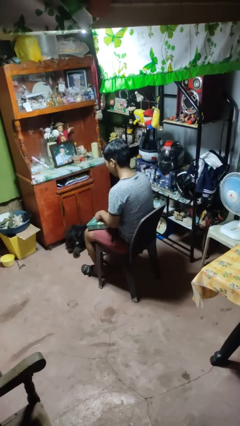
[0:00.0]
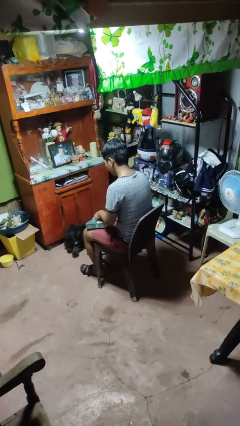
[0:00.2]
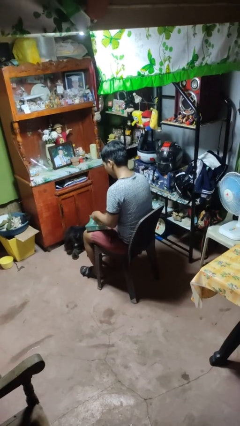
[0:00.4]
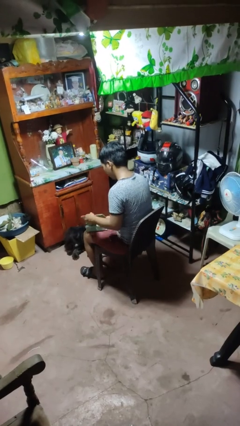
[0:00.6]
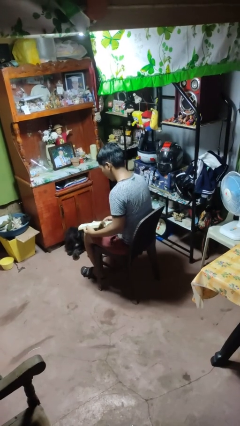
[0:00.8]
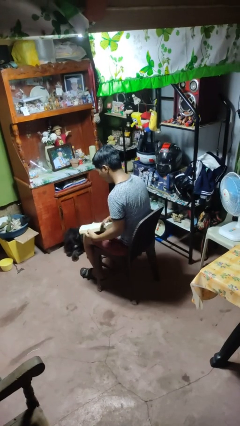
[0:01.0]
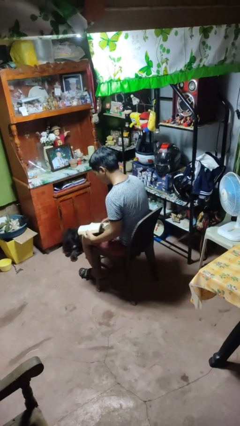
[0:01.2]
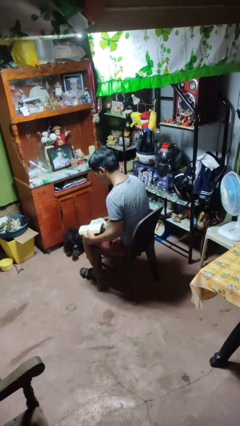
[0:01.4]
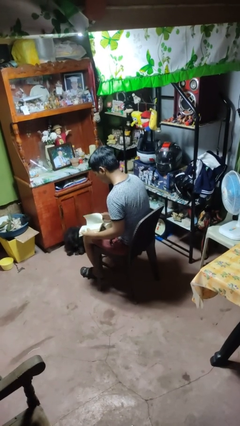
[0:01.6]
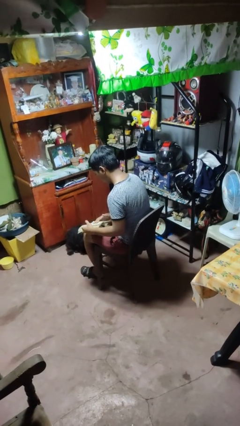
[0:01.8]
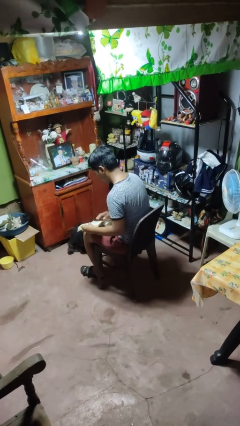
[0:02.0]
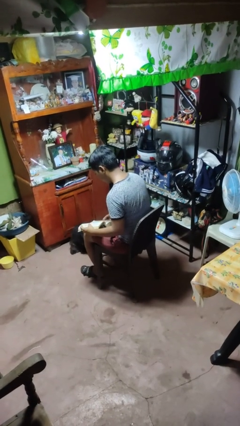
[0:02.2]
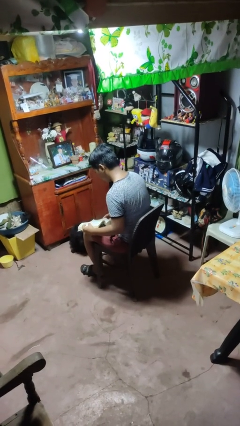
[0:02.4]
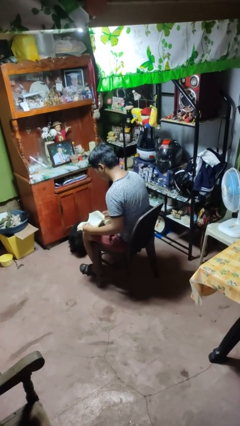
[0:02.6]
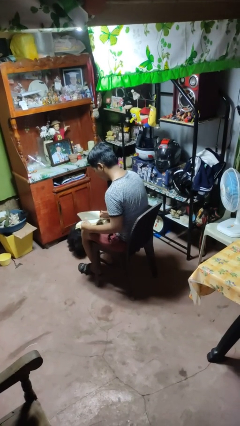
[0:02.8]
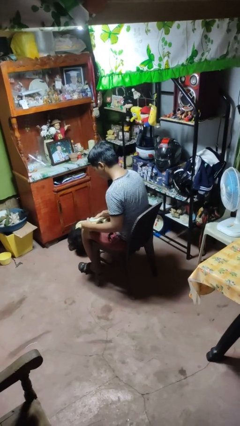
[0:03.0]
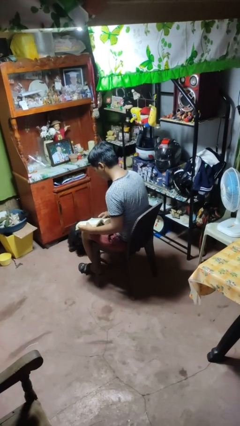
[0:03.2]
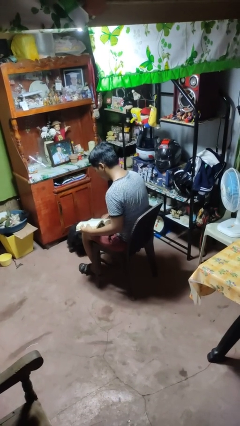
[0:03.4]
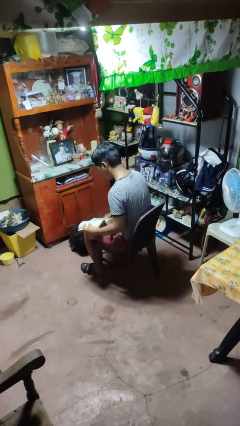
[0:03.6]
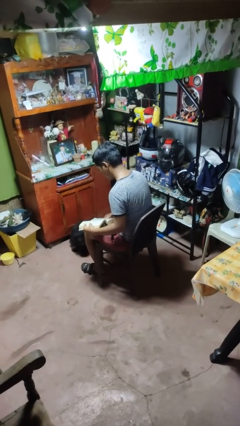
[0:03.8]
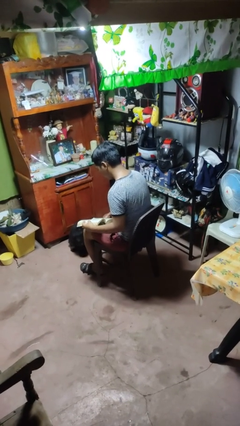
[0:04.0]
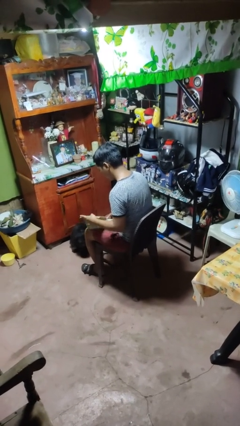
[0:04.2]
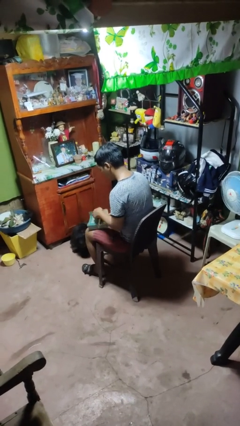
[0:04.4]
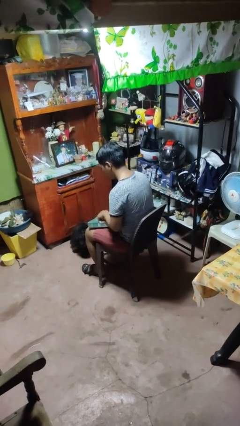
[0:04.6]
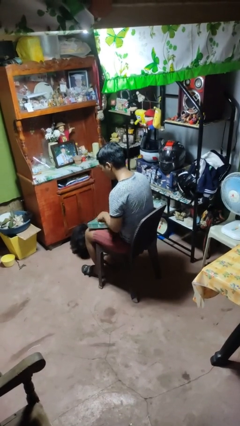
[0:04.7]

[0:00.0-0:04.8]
person reads book

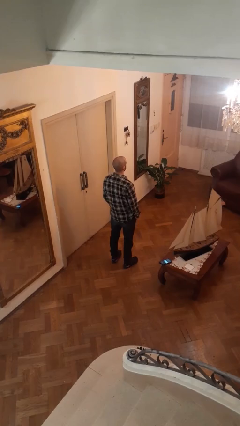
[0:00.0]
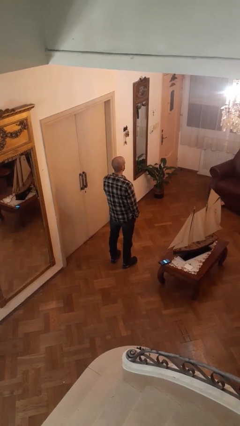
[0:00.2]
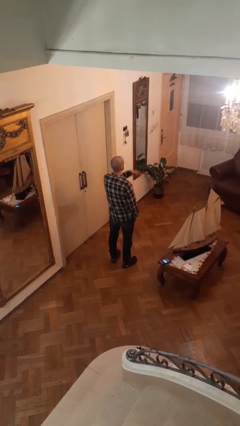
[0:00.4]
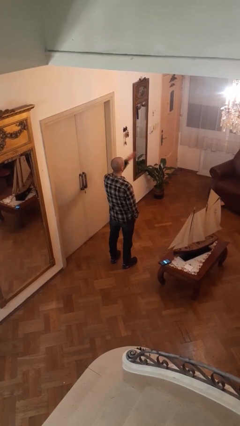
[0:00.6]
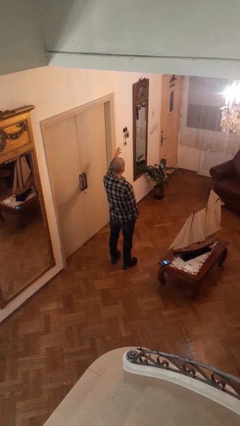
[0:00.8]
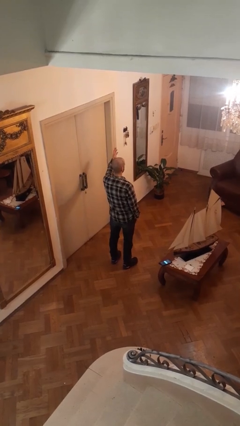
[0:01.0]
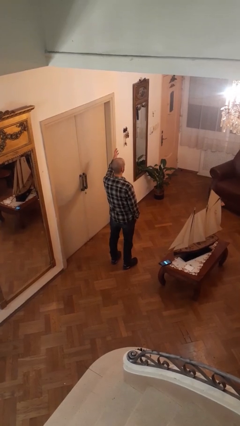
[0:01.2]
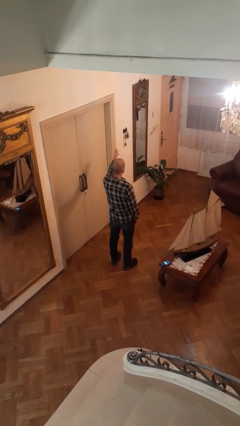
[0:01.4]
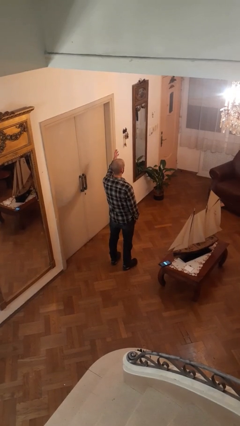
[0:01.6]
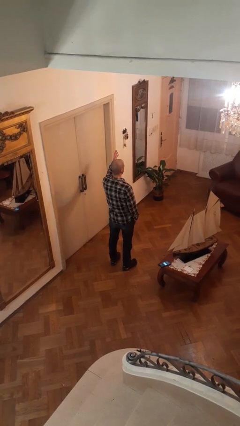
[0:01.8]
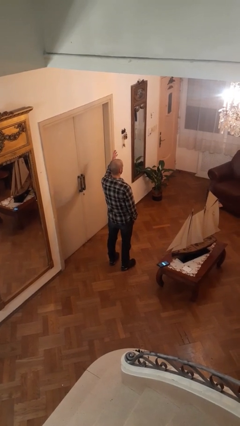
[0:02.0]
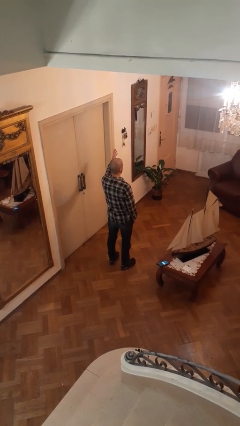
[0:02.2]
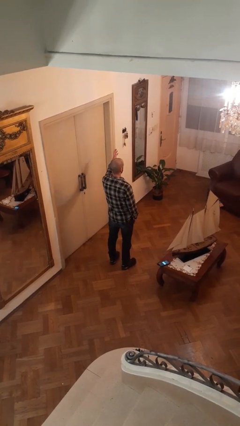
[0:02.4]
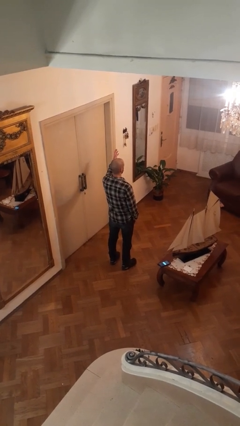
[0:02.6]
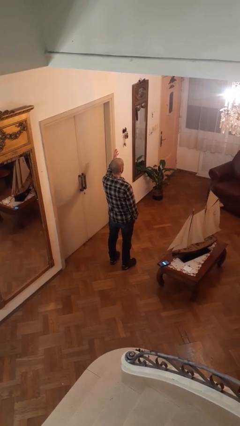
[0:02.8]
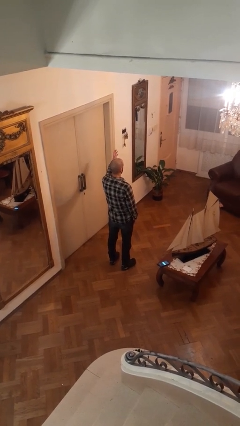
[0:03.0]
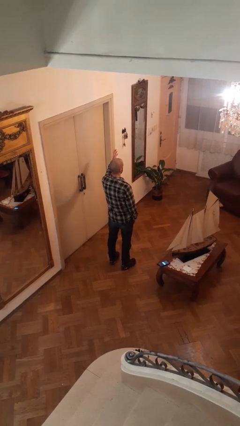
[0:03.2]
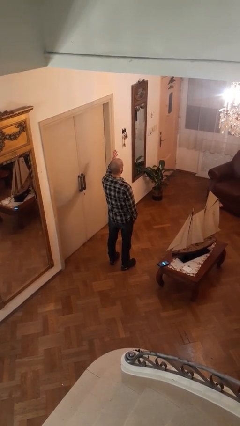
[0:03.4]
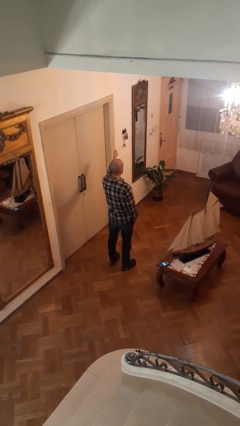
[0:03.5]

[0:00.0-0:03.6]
person gestures swipe left

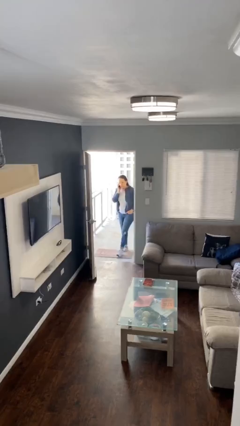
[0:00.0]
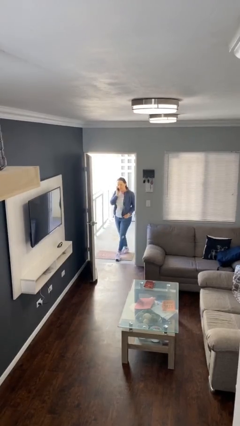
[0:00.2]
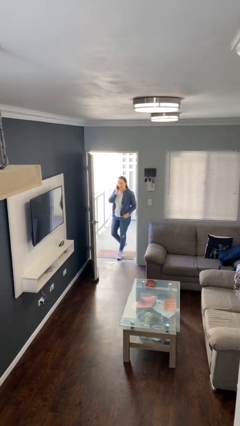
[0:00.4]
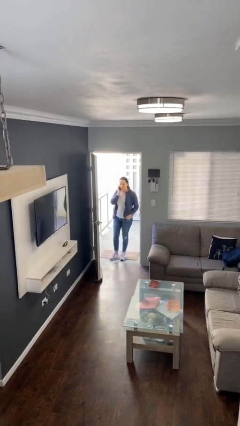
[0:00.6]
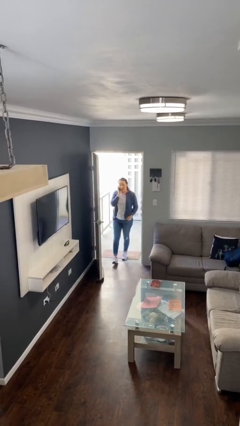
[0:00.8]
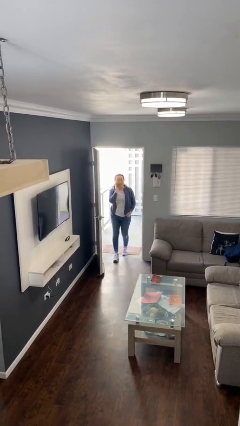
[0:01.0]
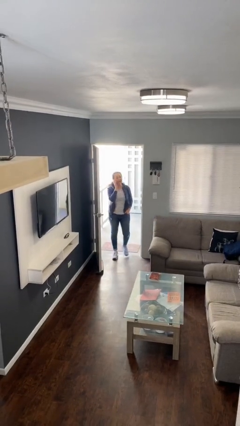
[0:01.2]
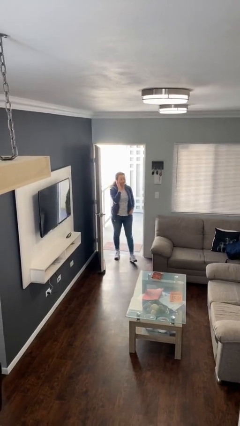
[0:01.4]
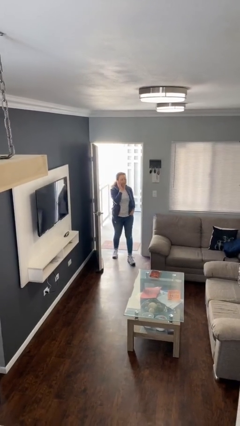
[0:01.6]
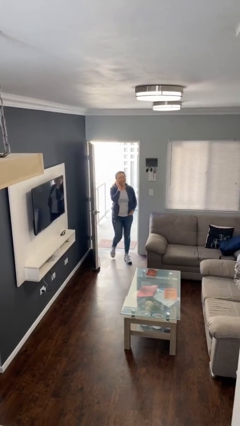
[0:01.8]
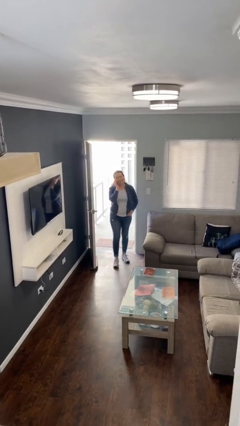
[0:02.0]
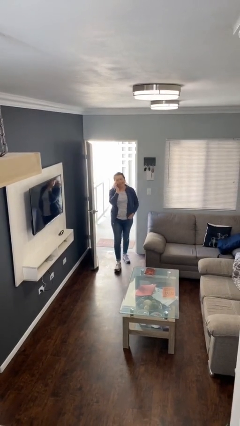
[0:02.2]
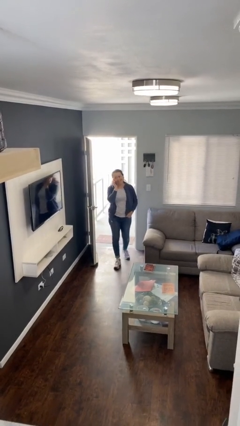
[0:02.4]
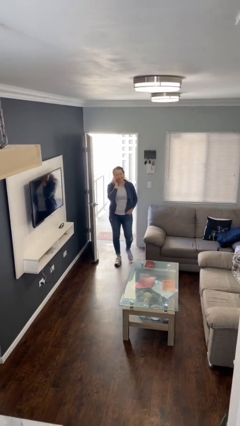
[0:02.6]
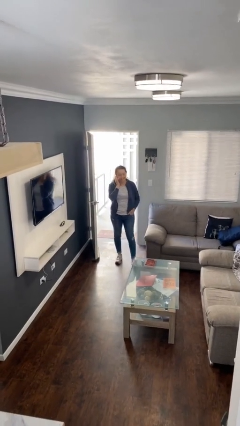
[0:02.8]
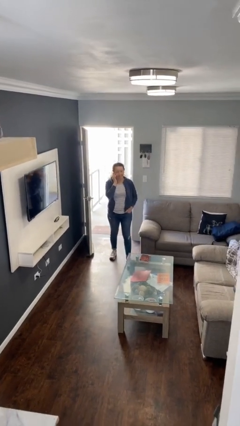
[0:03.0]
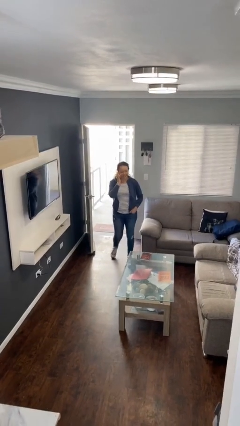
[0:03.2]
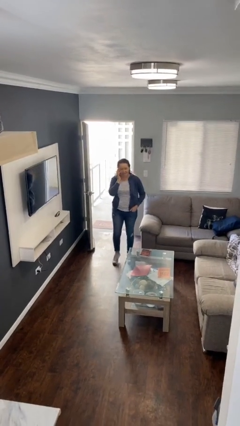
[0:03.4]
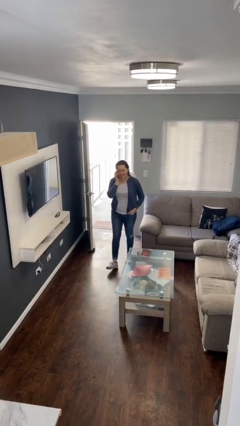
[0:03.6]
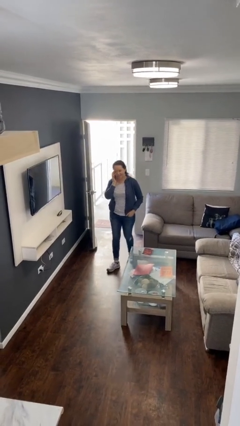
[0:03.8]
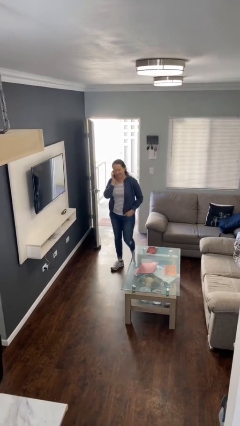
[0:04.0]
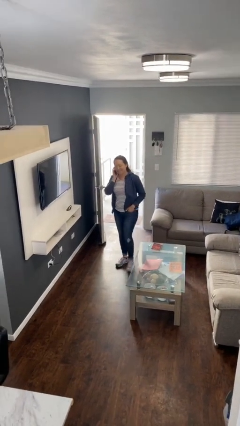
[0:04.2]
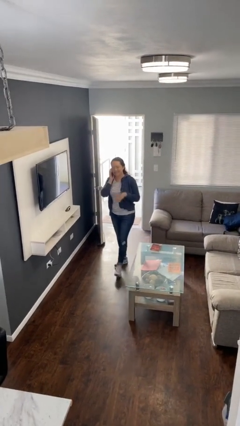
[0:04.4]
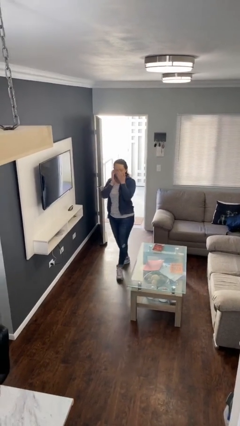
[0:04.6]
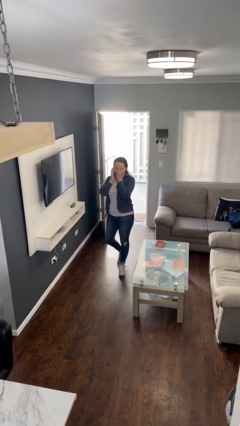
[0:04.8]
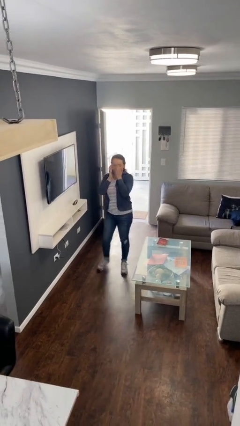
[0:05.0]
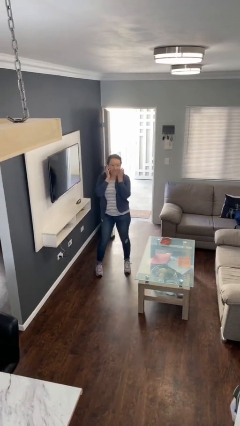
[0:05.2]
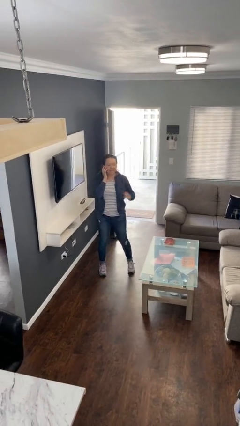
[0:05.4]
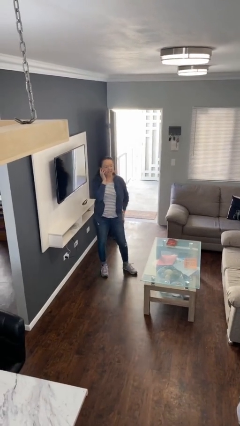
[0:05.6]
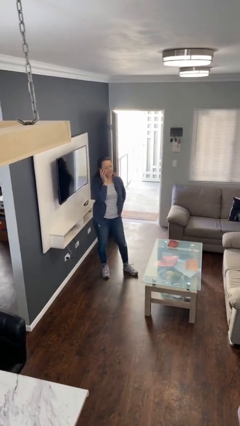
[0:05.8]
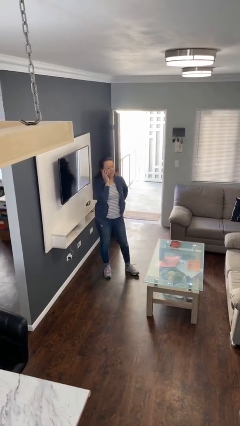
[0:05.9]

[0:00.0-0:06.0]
person enters scene through structure

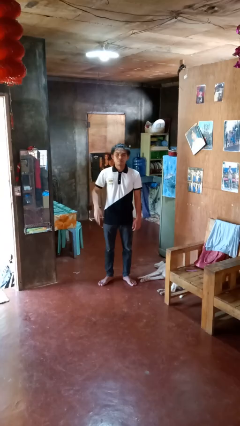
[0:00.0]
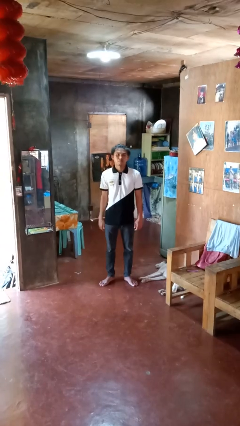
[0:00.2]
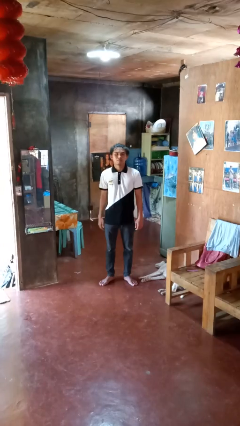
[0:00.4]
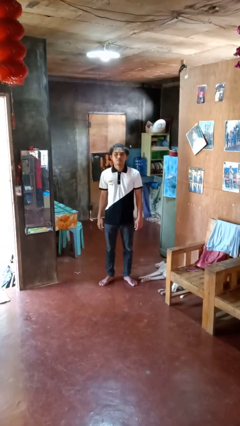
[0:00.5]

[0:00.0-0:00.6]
person gestures lower hand

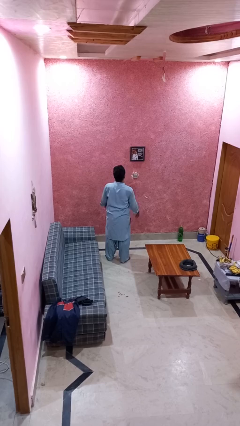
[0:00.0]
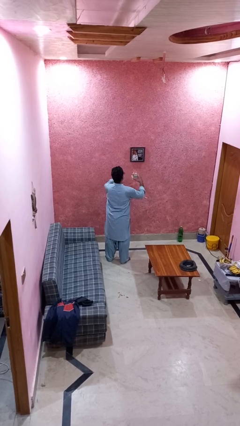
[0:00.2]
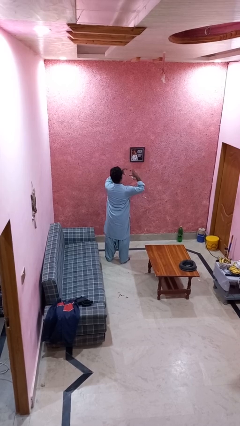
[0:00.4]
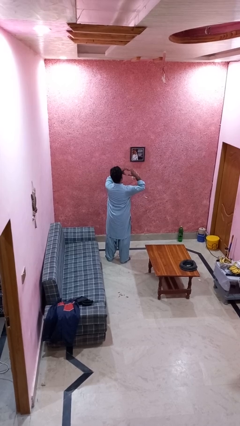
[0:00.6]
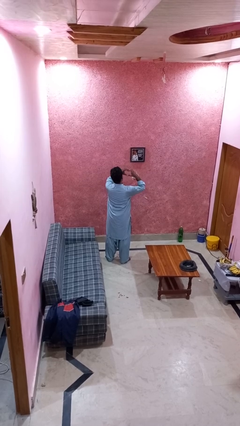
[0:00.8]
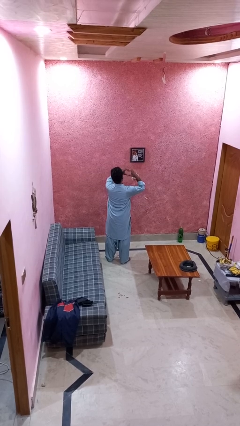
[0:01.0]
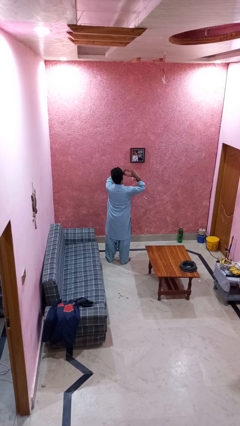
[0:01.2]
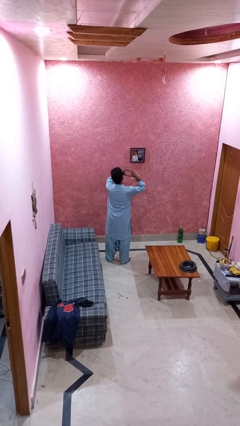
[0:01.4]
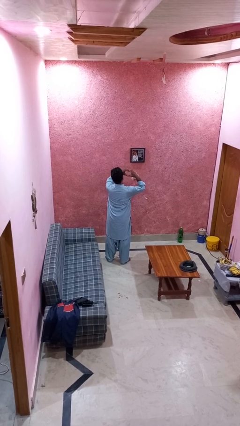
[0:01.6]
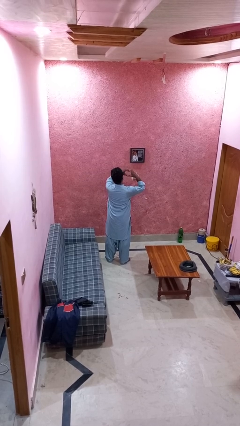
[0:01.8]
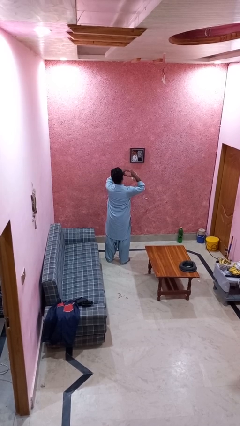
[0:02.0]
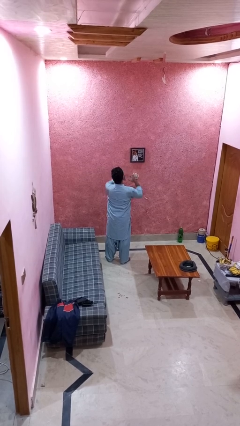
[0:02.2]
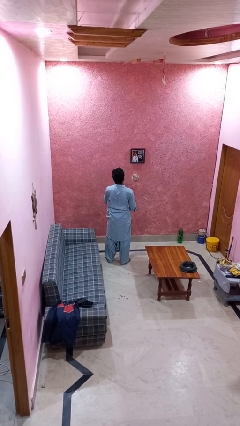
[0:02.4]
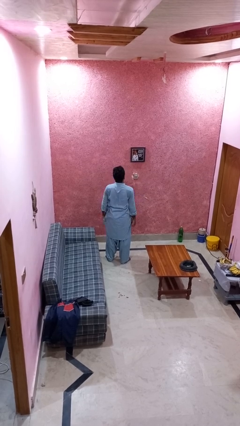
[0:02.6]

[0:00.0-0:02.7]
person gestures heart

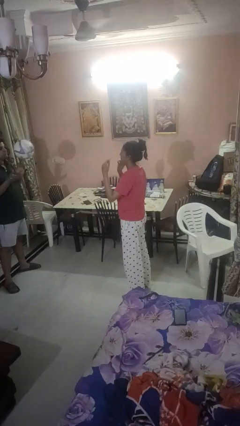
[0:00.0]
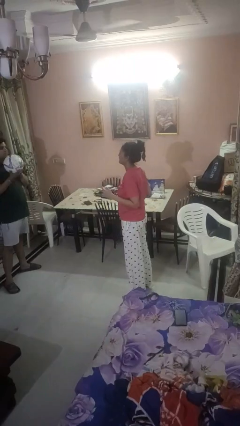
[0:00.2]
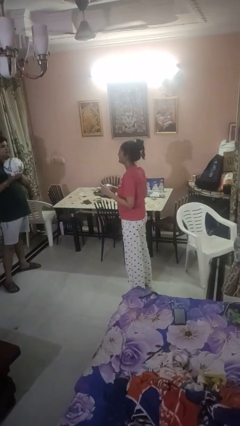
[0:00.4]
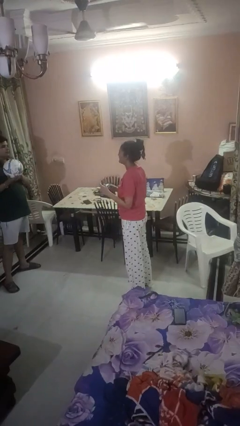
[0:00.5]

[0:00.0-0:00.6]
person throws object to person
